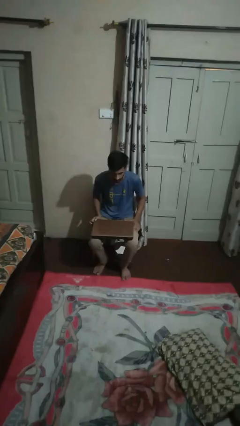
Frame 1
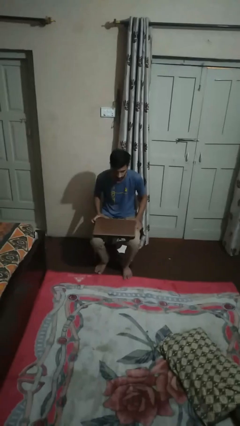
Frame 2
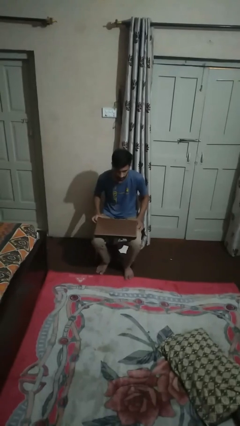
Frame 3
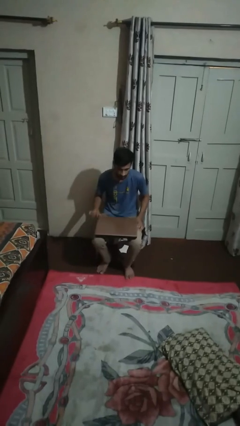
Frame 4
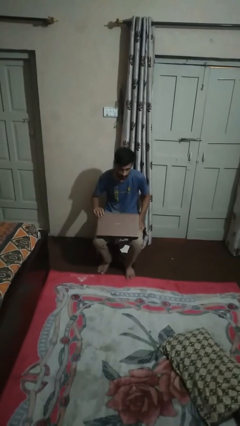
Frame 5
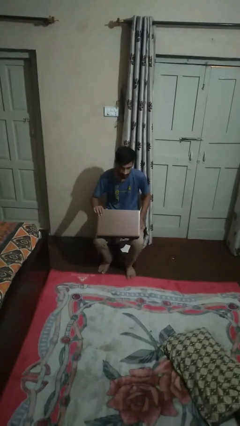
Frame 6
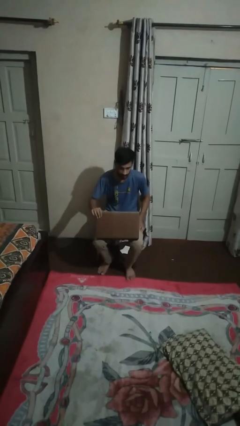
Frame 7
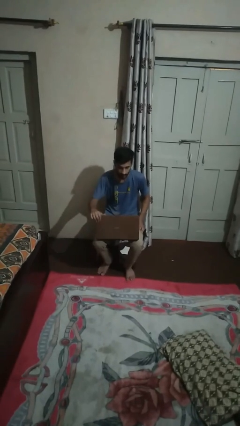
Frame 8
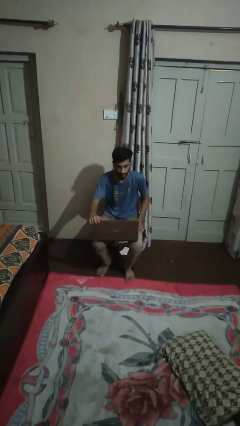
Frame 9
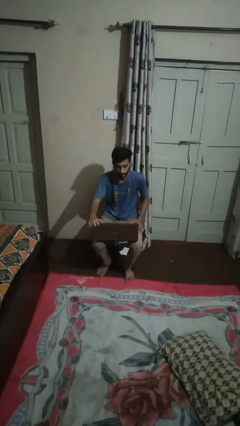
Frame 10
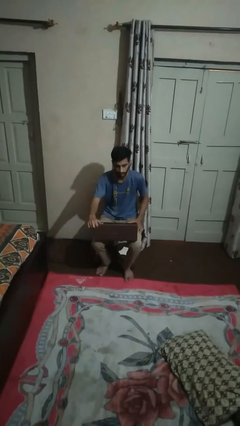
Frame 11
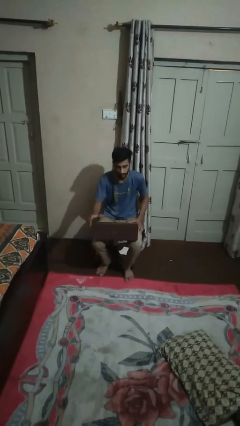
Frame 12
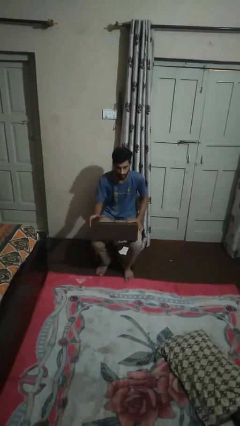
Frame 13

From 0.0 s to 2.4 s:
person opens laptop

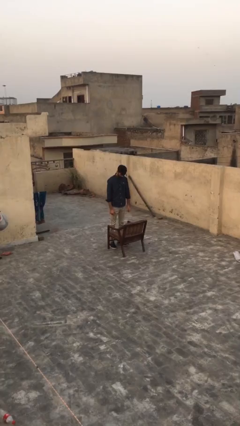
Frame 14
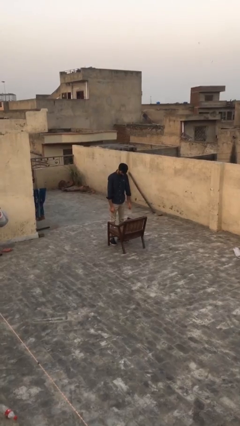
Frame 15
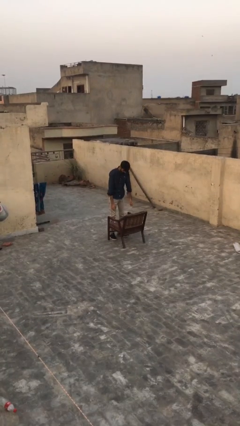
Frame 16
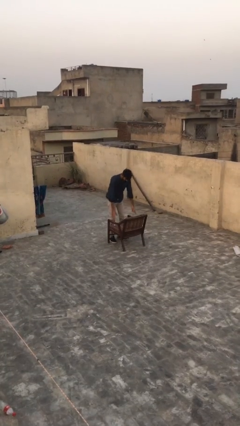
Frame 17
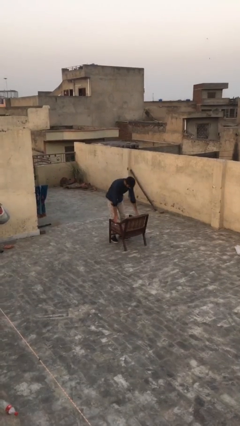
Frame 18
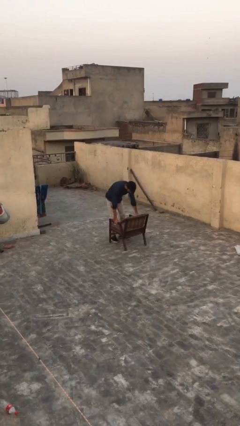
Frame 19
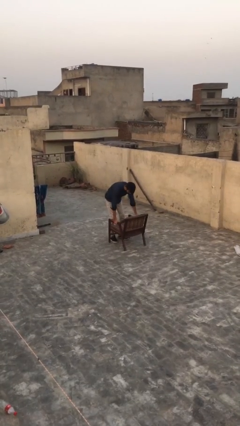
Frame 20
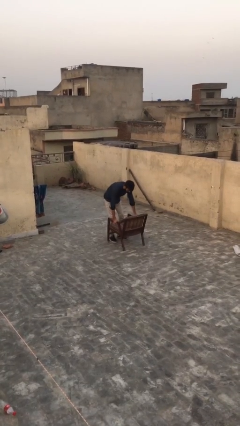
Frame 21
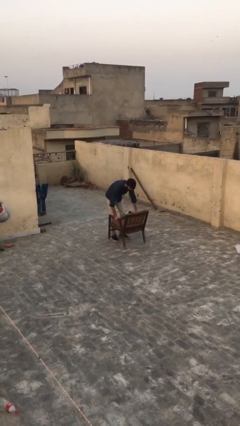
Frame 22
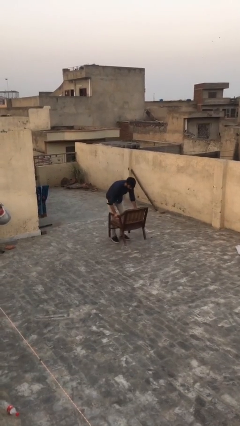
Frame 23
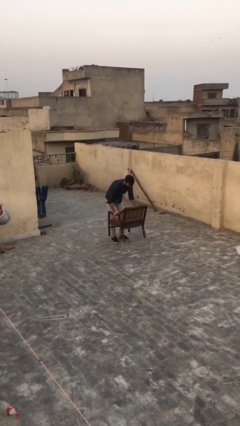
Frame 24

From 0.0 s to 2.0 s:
person picks up object from floor

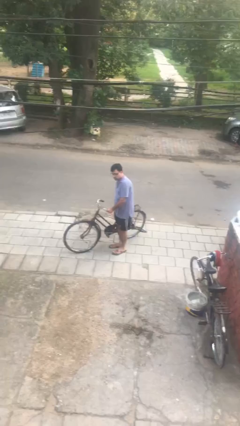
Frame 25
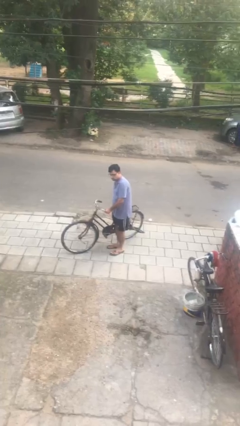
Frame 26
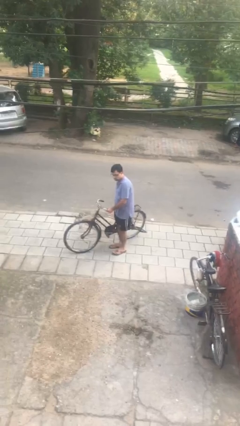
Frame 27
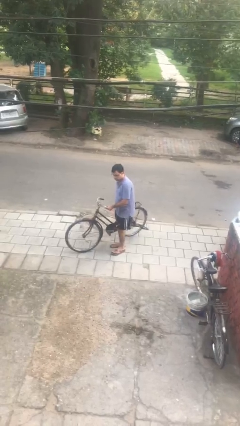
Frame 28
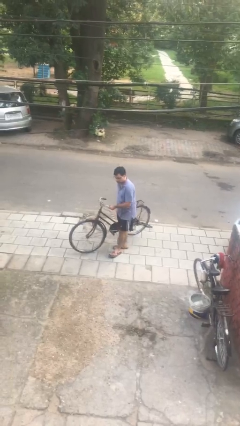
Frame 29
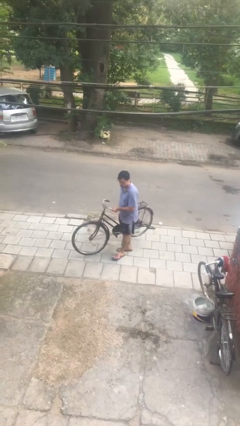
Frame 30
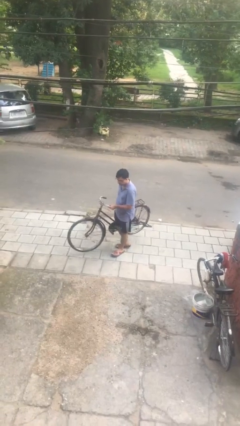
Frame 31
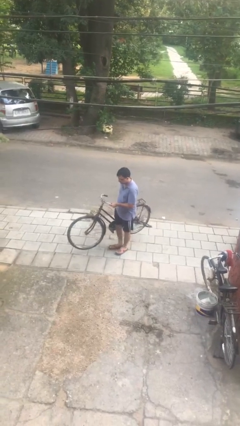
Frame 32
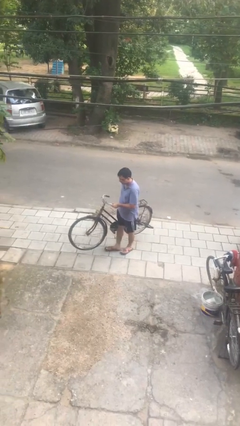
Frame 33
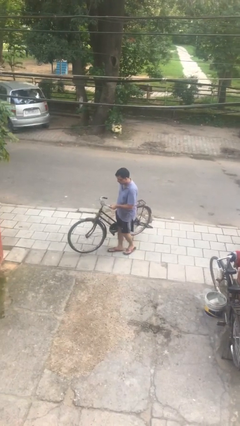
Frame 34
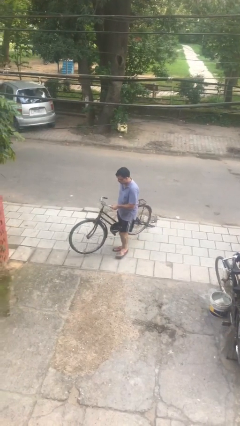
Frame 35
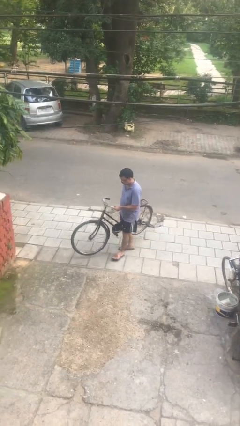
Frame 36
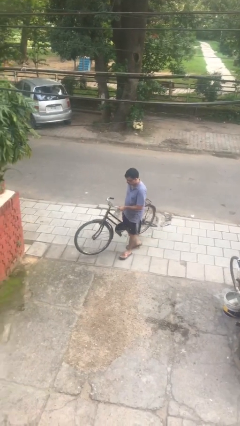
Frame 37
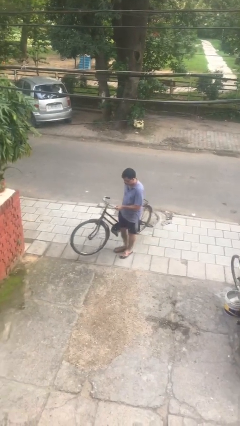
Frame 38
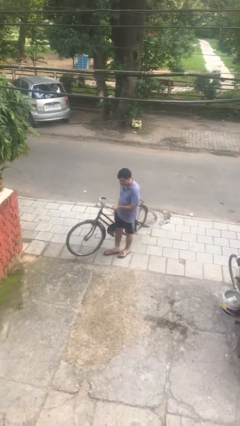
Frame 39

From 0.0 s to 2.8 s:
person carries bicycle

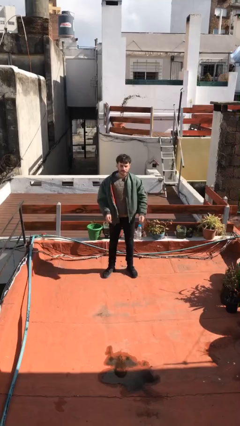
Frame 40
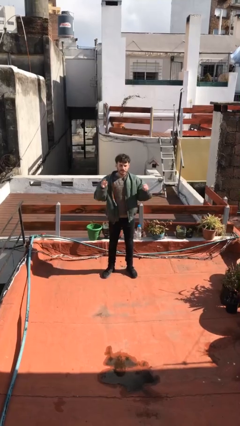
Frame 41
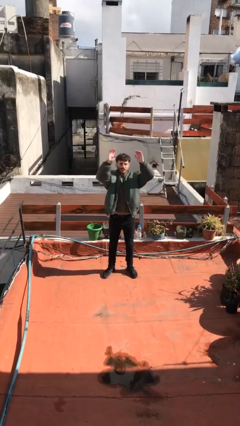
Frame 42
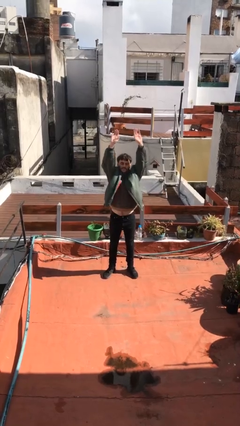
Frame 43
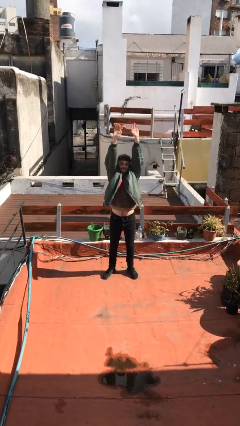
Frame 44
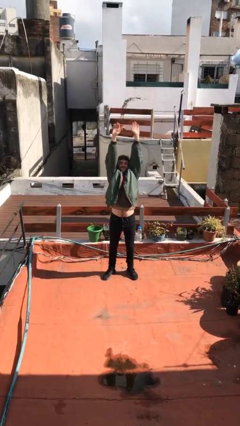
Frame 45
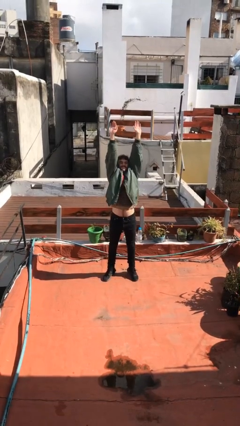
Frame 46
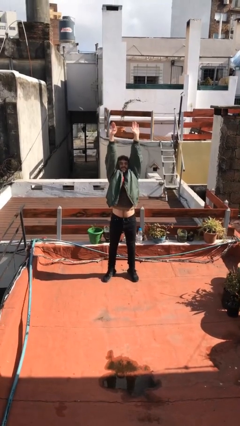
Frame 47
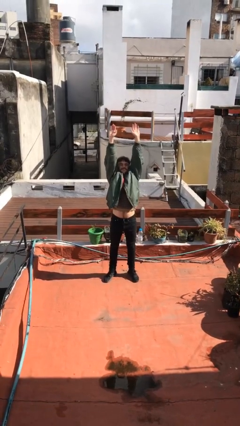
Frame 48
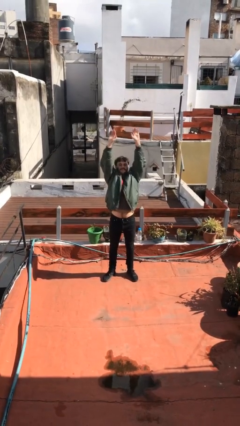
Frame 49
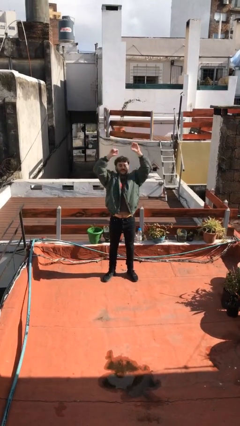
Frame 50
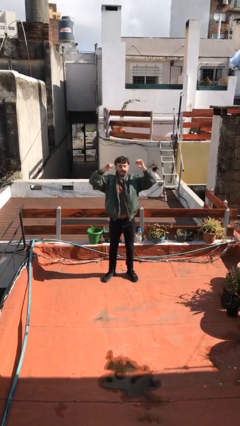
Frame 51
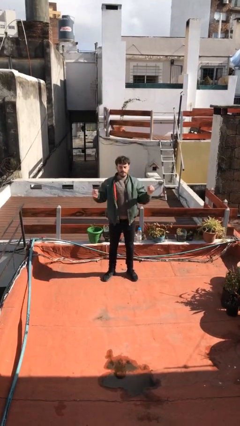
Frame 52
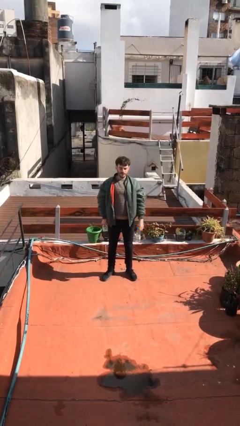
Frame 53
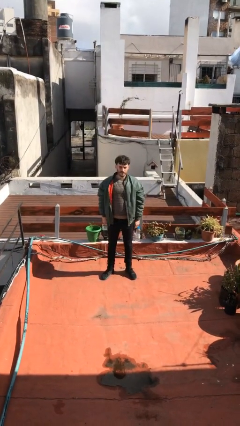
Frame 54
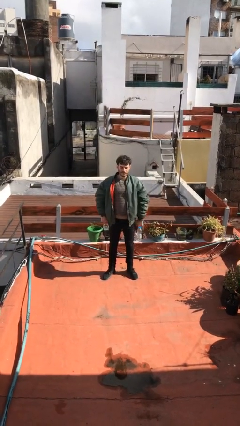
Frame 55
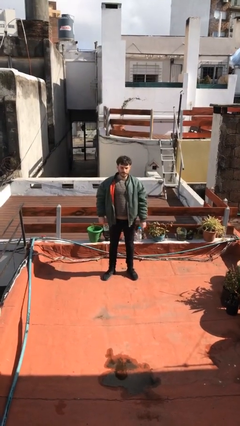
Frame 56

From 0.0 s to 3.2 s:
person stretches arms over head

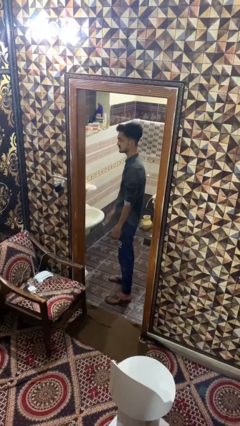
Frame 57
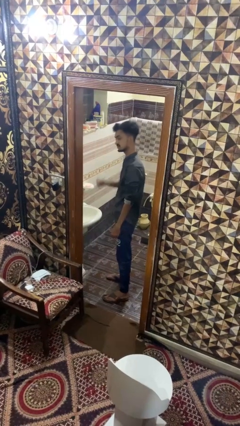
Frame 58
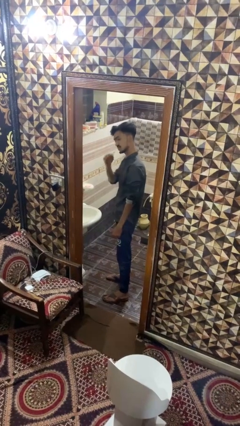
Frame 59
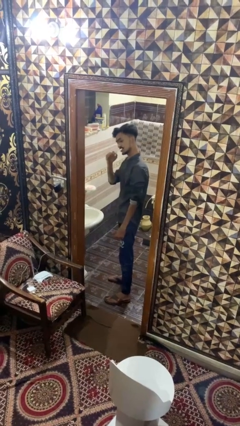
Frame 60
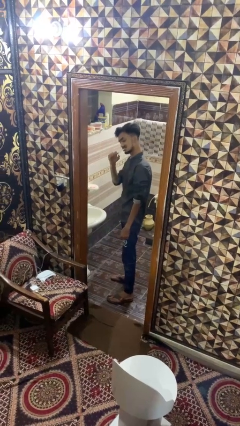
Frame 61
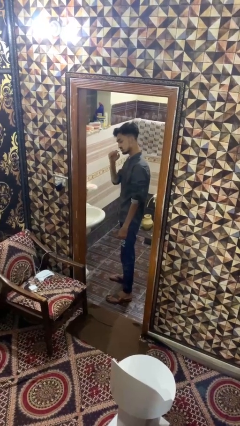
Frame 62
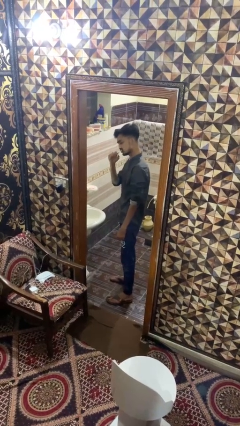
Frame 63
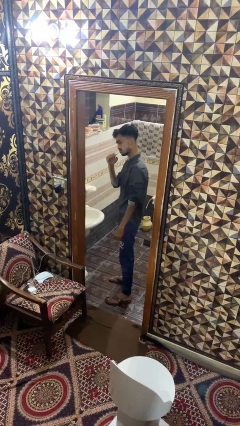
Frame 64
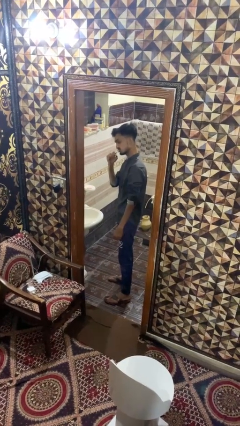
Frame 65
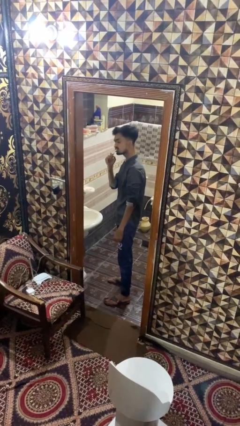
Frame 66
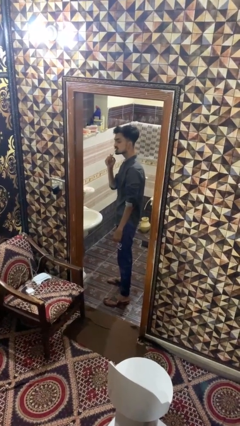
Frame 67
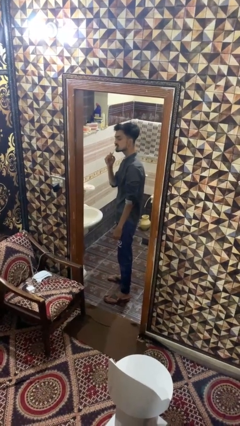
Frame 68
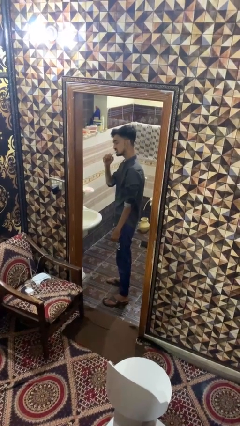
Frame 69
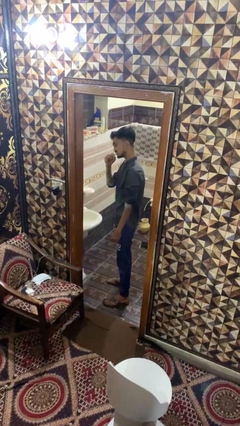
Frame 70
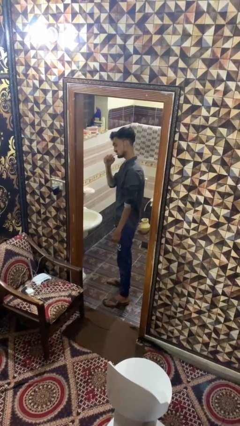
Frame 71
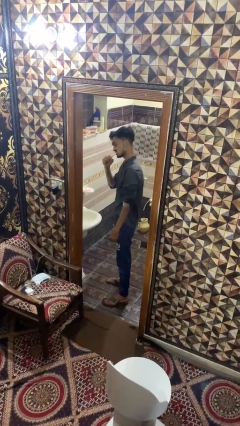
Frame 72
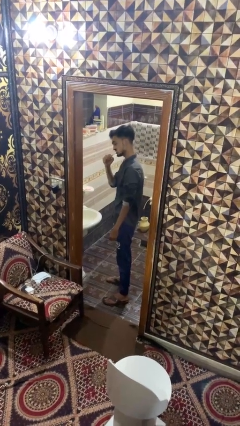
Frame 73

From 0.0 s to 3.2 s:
person brushes teeth

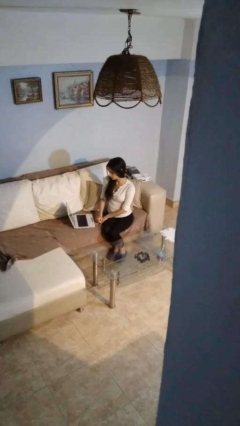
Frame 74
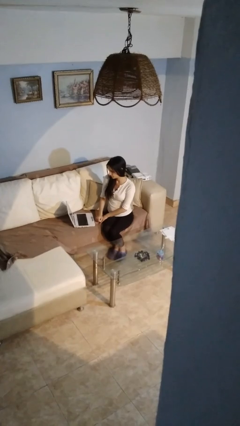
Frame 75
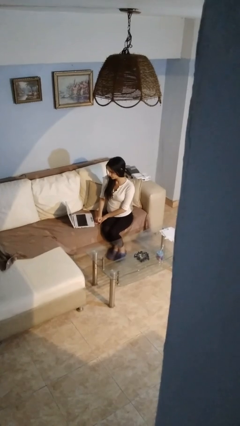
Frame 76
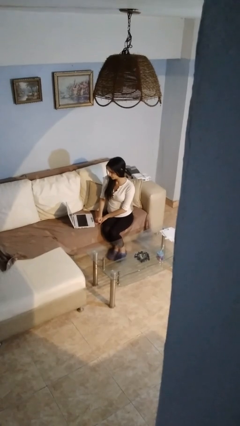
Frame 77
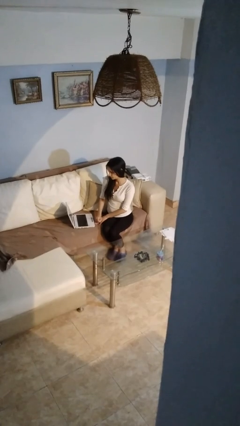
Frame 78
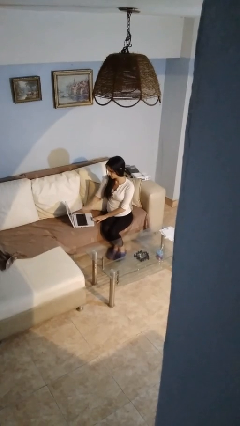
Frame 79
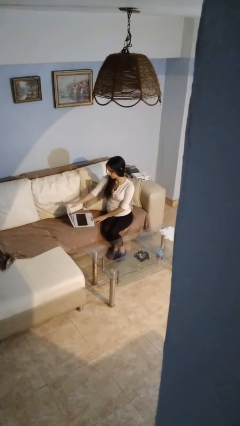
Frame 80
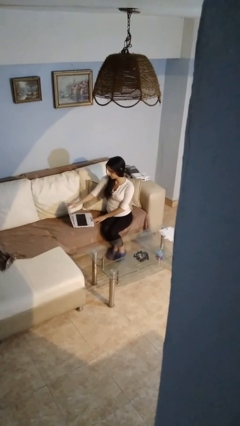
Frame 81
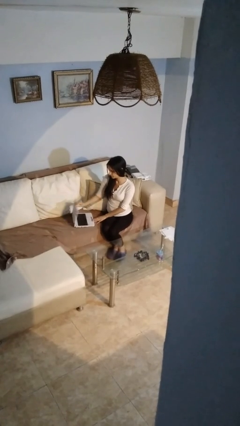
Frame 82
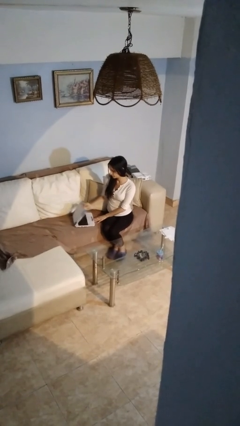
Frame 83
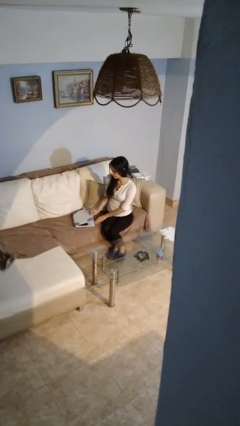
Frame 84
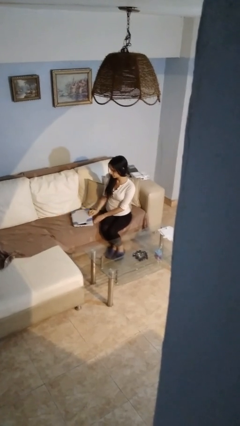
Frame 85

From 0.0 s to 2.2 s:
person closes laptop

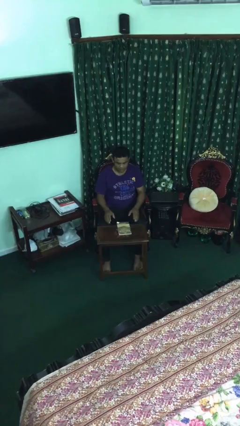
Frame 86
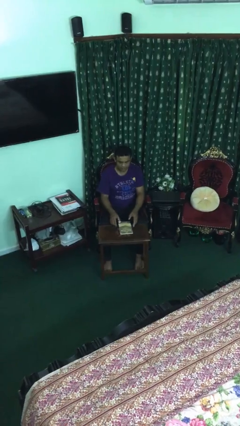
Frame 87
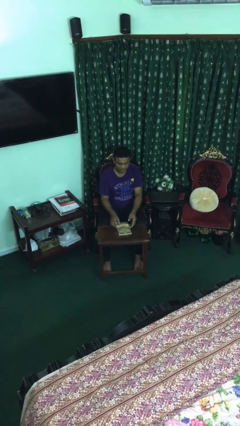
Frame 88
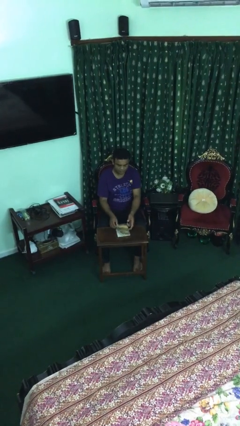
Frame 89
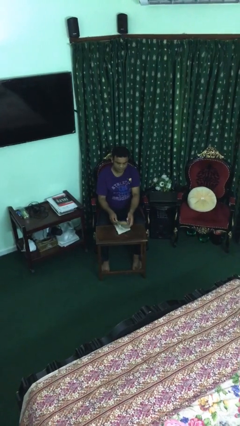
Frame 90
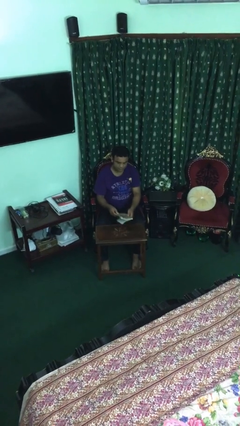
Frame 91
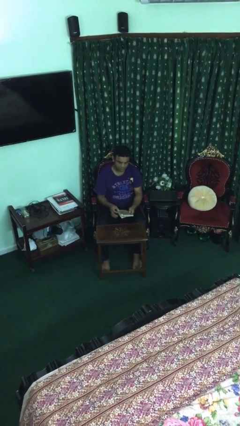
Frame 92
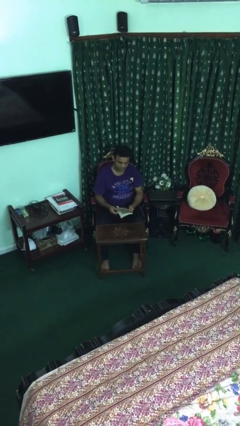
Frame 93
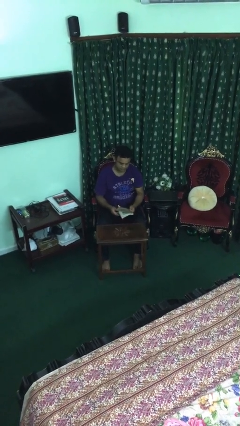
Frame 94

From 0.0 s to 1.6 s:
person picks up object from table
